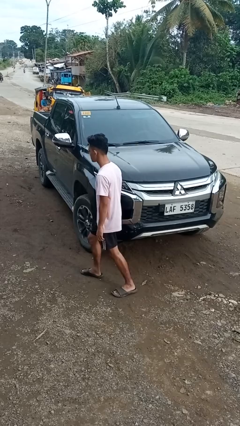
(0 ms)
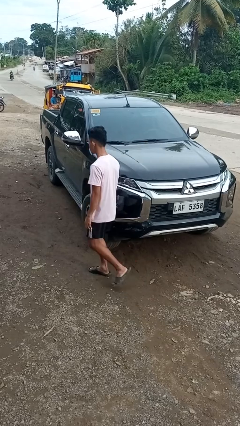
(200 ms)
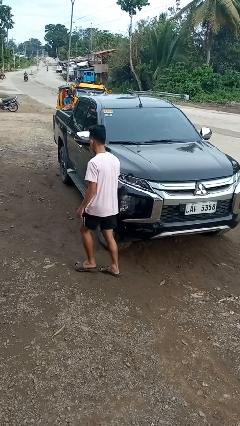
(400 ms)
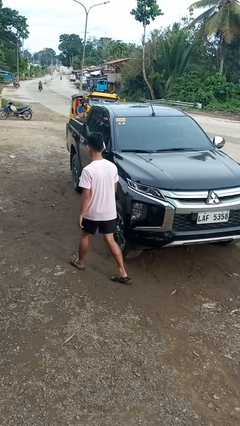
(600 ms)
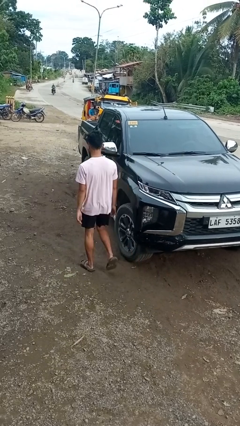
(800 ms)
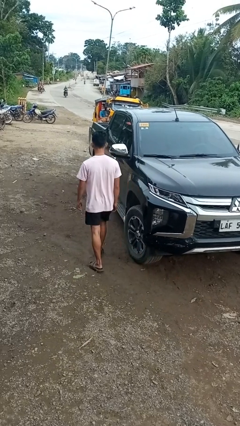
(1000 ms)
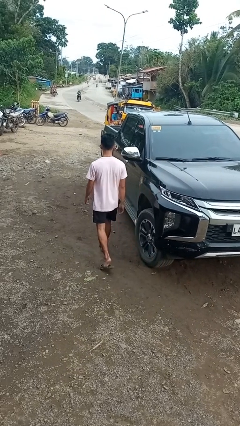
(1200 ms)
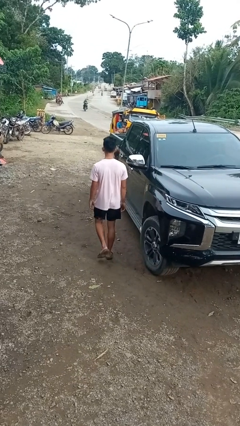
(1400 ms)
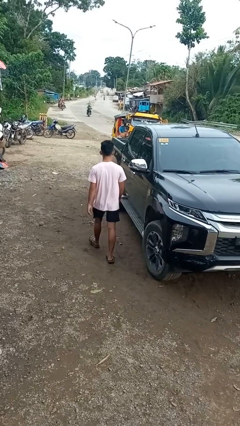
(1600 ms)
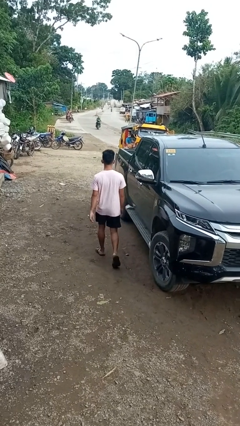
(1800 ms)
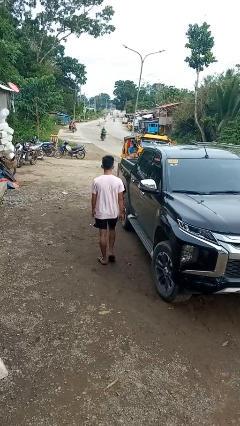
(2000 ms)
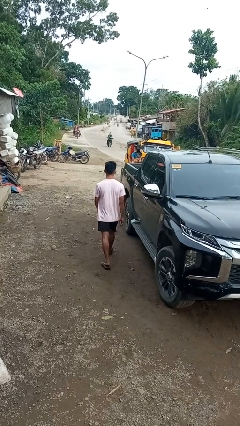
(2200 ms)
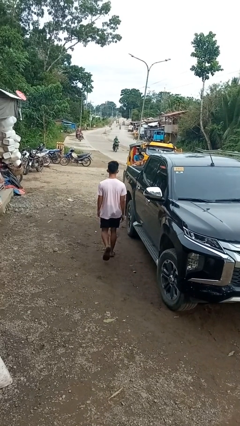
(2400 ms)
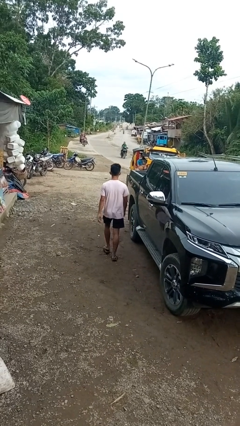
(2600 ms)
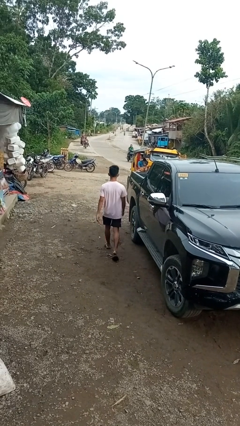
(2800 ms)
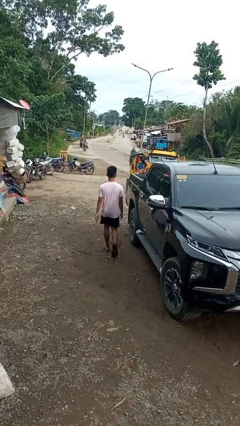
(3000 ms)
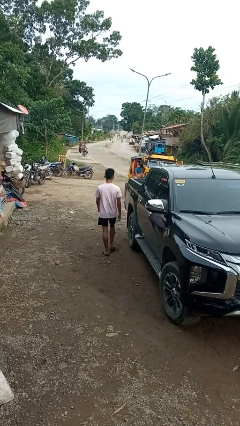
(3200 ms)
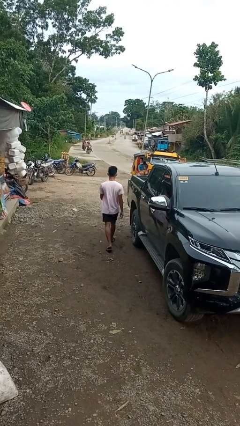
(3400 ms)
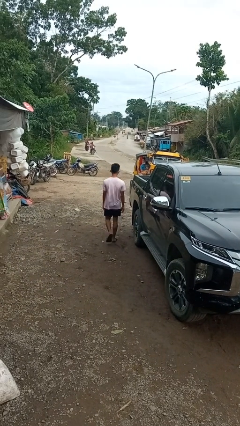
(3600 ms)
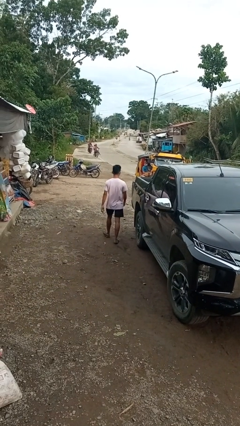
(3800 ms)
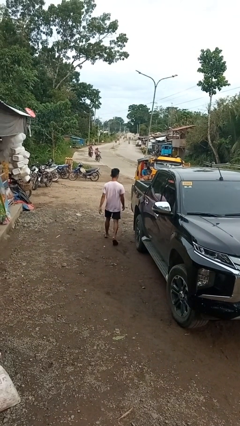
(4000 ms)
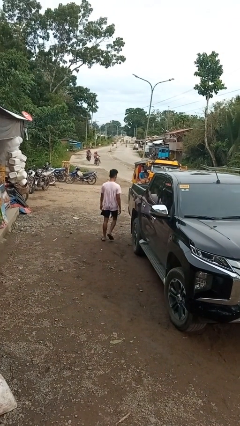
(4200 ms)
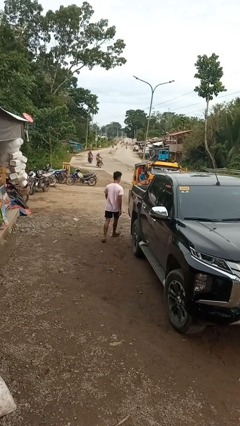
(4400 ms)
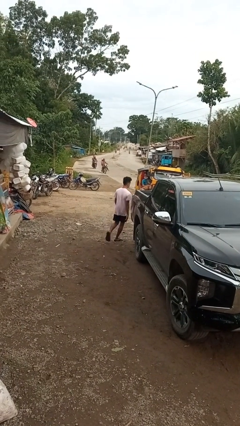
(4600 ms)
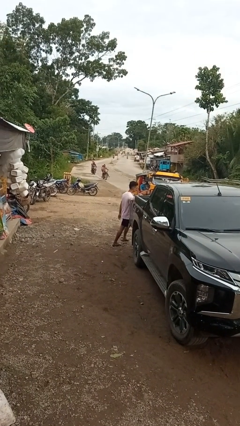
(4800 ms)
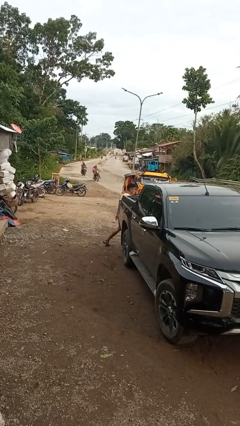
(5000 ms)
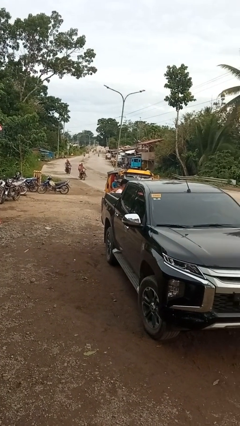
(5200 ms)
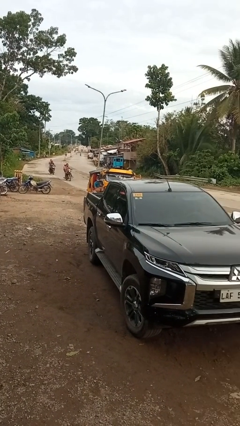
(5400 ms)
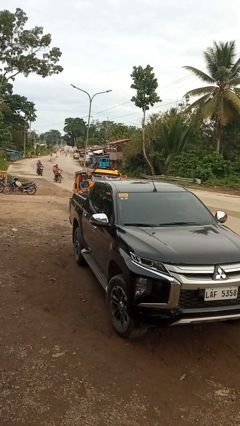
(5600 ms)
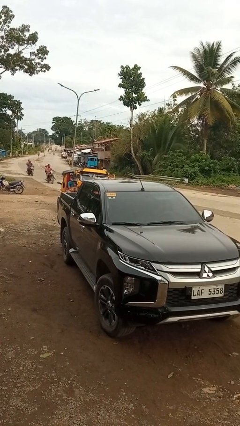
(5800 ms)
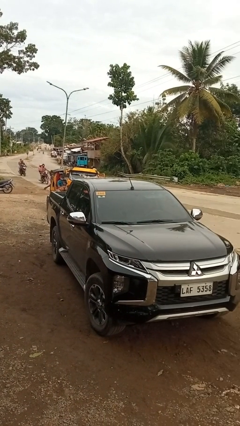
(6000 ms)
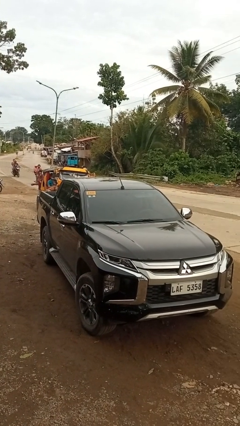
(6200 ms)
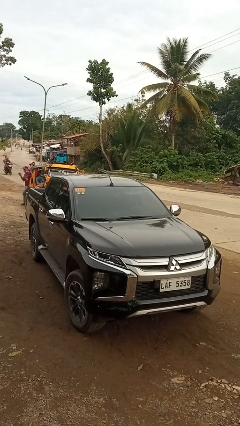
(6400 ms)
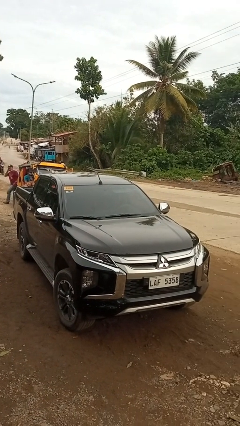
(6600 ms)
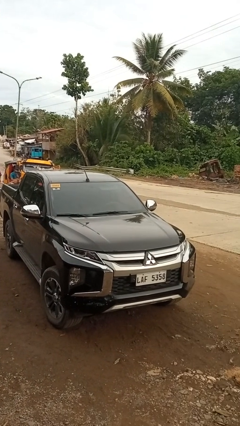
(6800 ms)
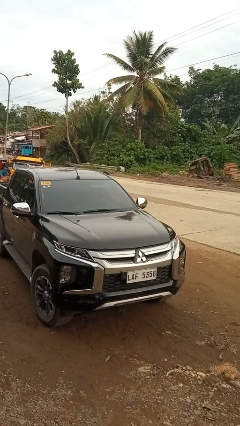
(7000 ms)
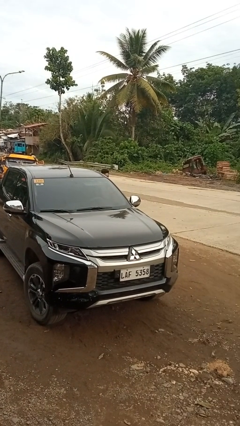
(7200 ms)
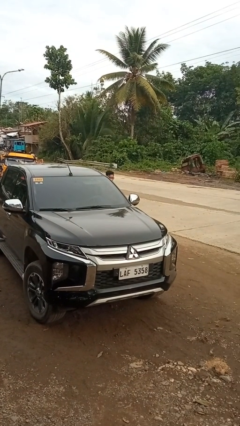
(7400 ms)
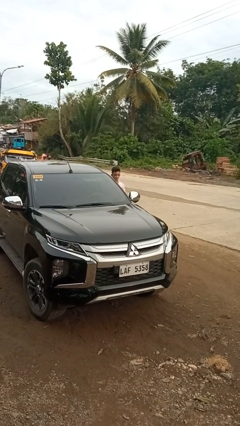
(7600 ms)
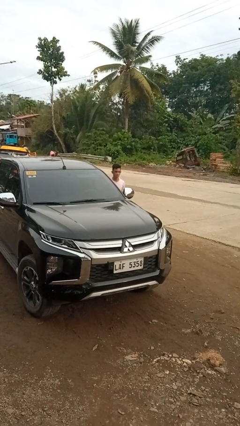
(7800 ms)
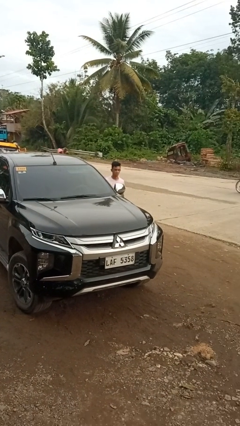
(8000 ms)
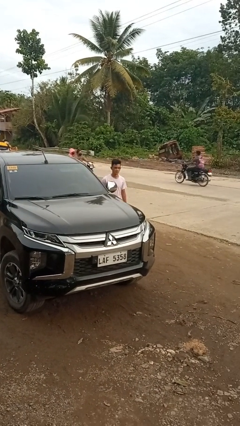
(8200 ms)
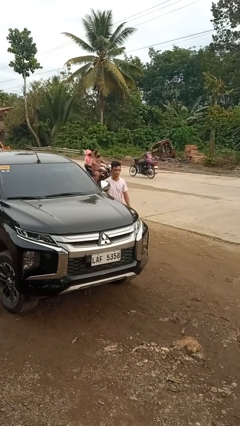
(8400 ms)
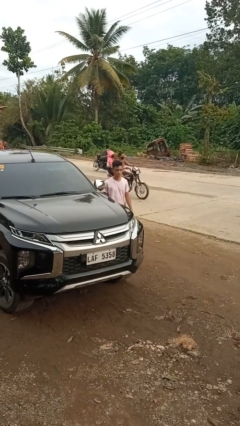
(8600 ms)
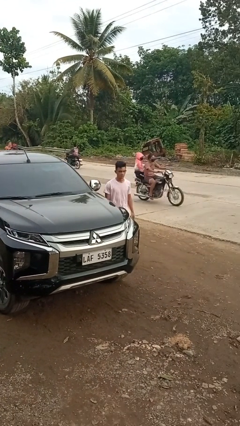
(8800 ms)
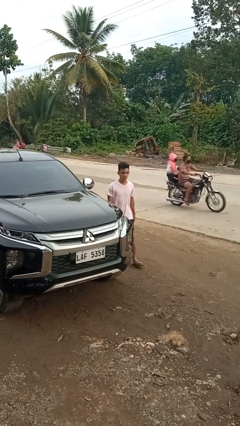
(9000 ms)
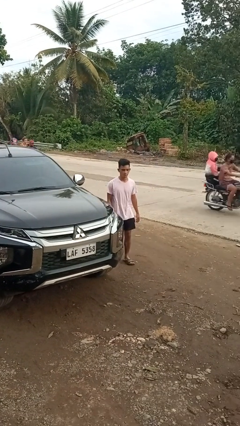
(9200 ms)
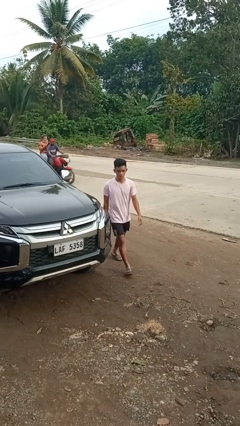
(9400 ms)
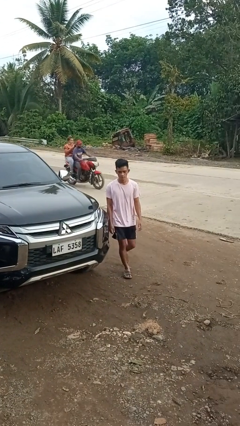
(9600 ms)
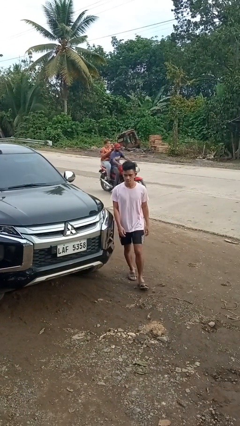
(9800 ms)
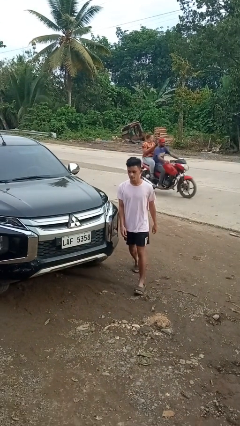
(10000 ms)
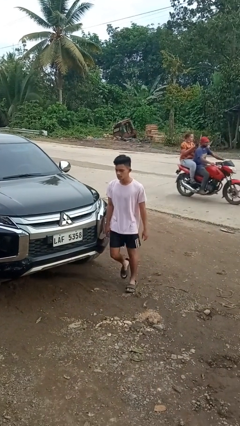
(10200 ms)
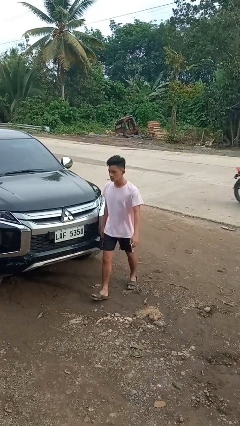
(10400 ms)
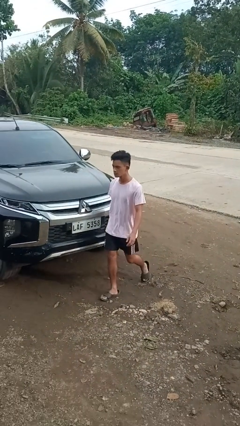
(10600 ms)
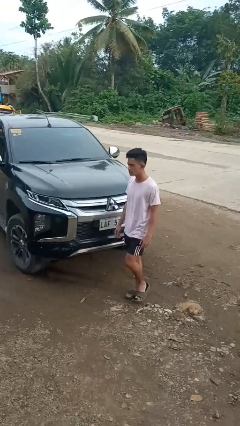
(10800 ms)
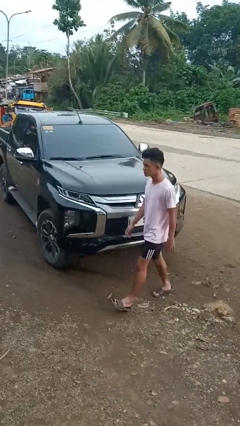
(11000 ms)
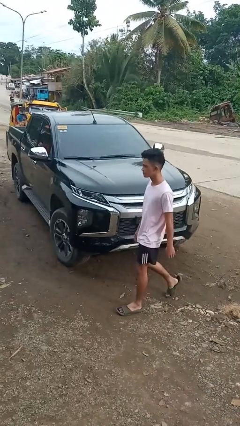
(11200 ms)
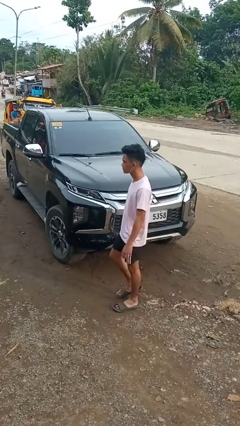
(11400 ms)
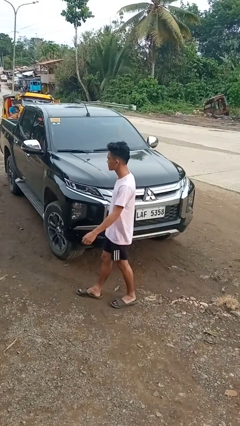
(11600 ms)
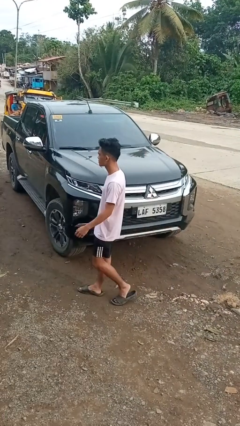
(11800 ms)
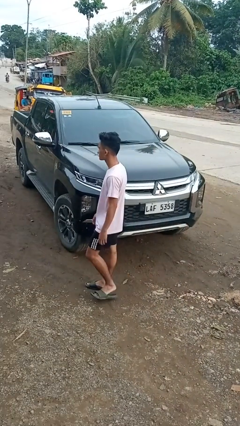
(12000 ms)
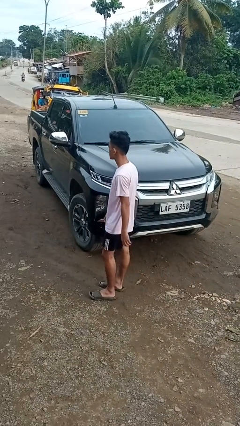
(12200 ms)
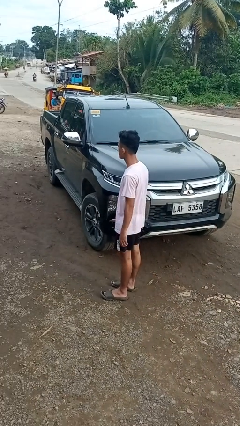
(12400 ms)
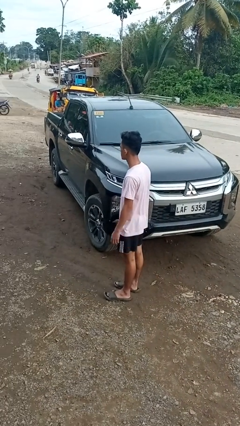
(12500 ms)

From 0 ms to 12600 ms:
person walks around car

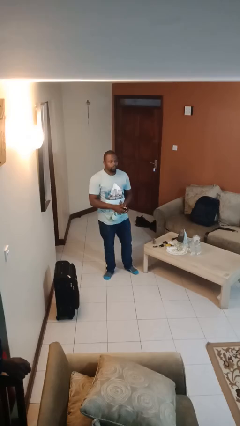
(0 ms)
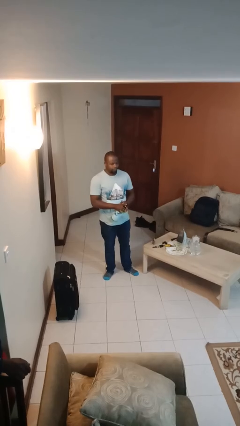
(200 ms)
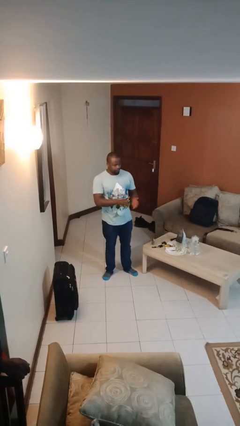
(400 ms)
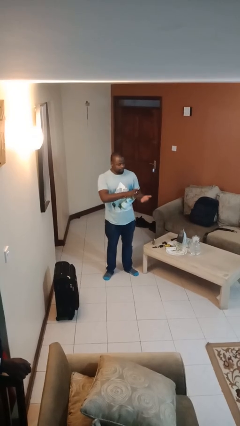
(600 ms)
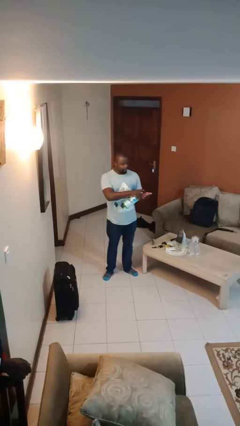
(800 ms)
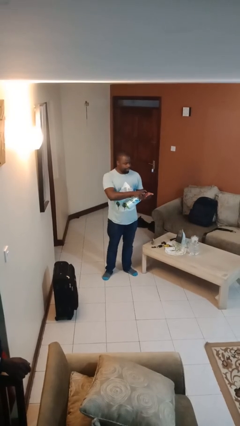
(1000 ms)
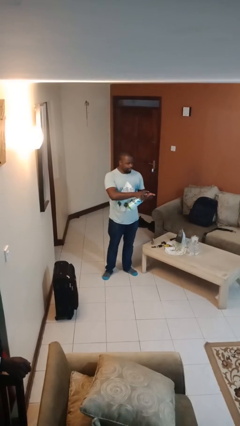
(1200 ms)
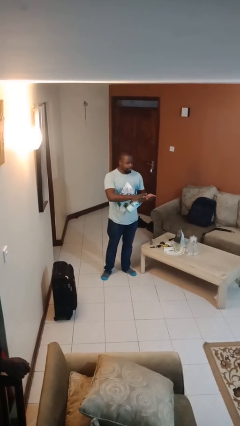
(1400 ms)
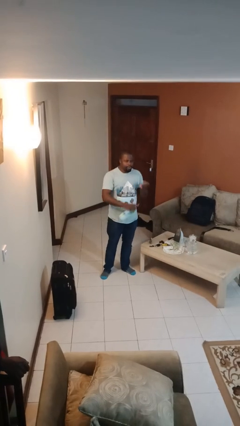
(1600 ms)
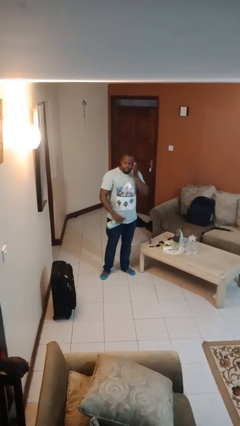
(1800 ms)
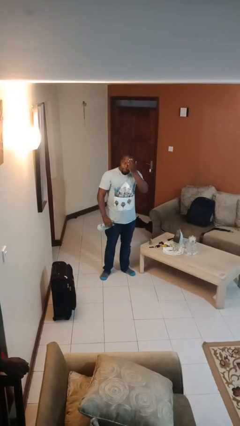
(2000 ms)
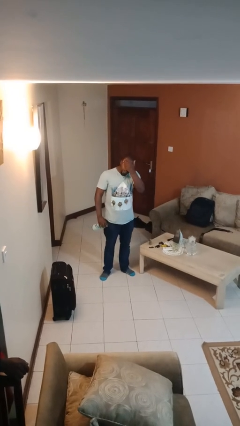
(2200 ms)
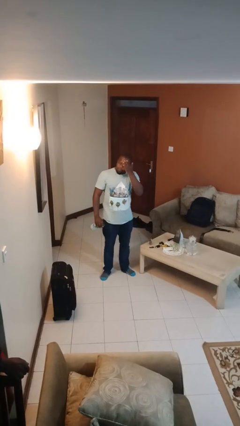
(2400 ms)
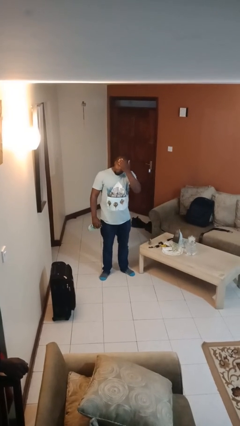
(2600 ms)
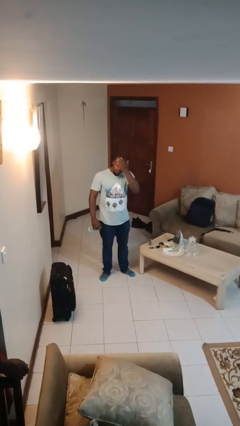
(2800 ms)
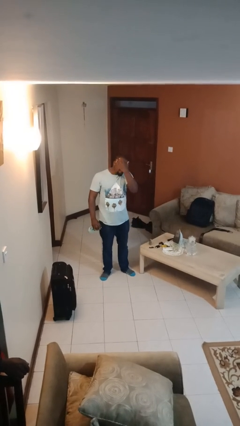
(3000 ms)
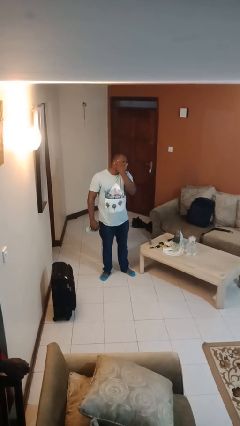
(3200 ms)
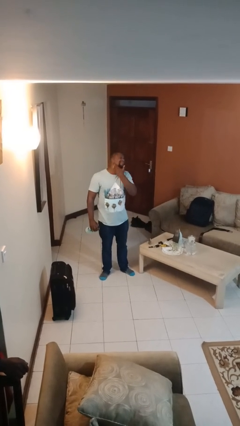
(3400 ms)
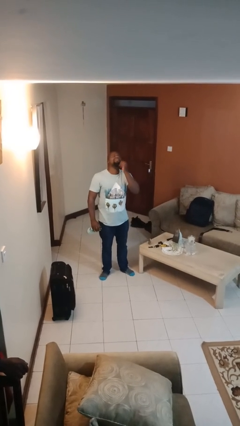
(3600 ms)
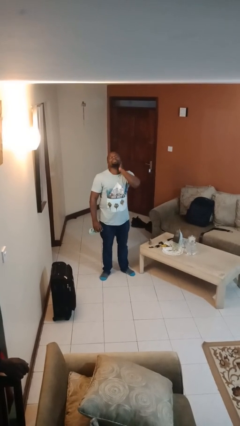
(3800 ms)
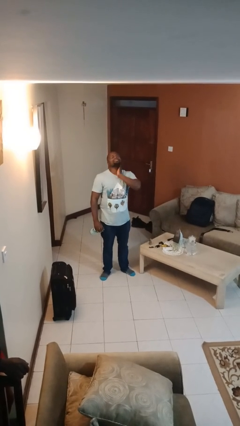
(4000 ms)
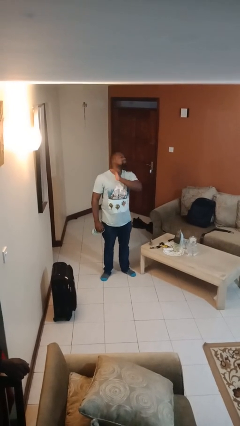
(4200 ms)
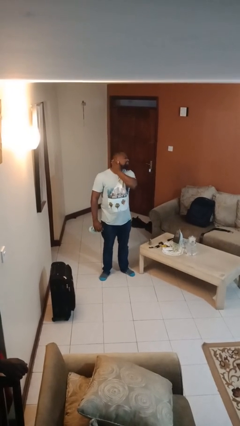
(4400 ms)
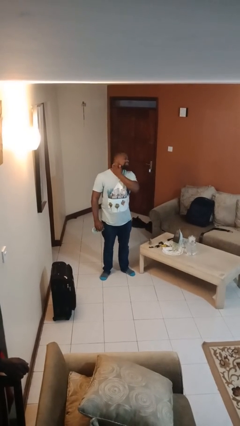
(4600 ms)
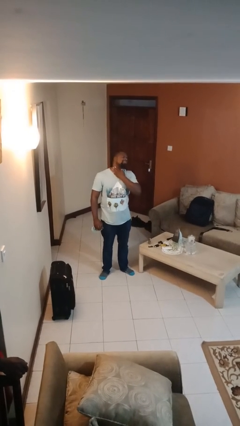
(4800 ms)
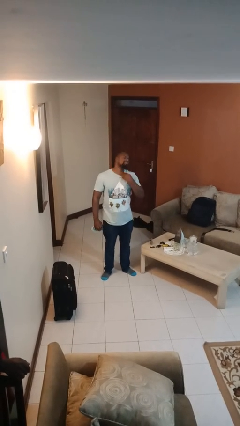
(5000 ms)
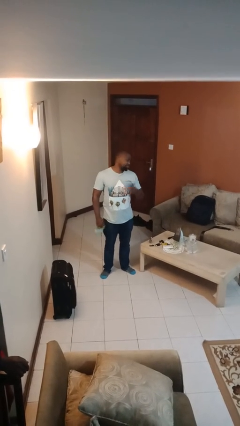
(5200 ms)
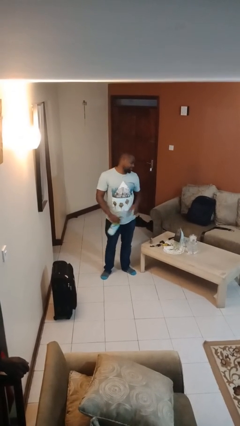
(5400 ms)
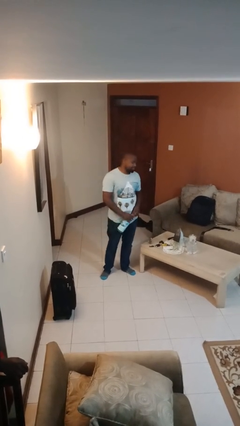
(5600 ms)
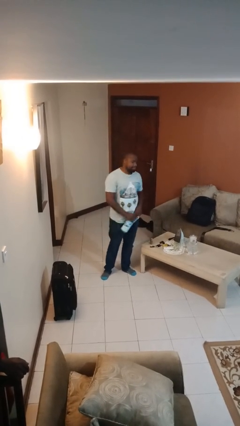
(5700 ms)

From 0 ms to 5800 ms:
person applies sunscreen
